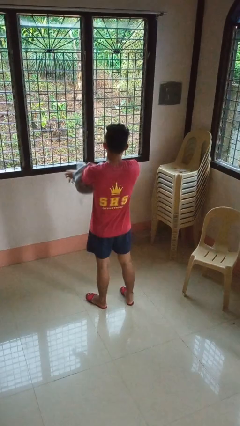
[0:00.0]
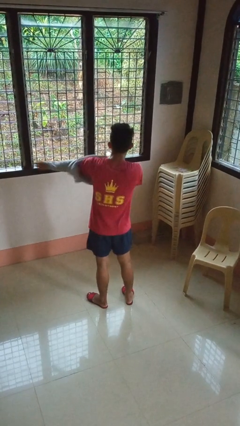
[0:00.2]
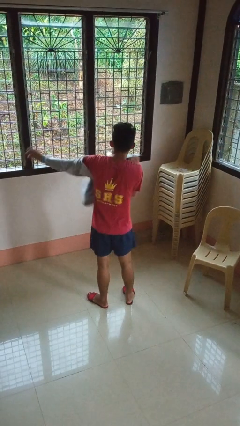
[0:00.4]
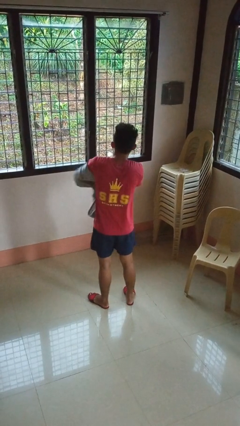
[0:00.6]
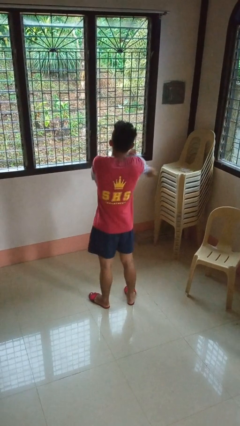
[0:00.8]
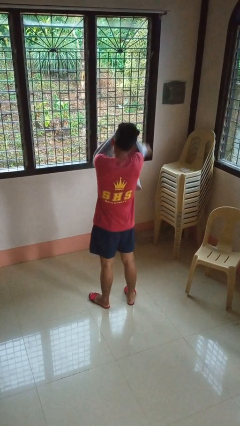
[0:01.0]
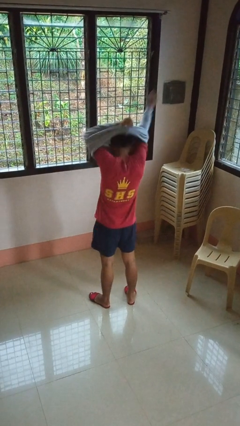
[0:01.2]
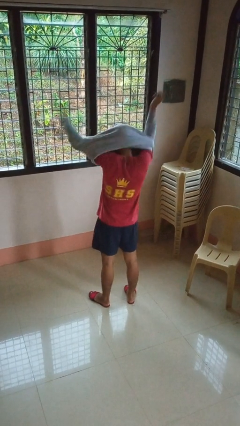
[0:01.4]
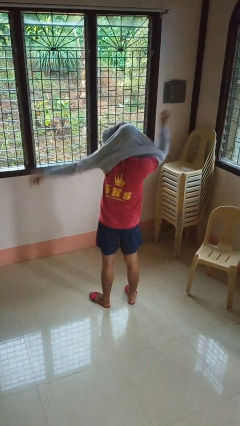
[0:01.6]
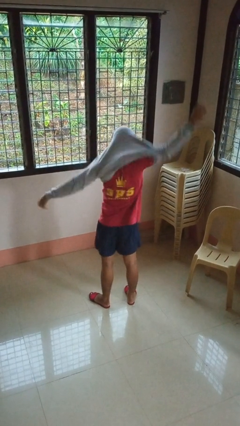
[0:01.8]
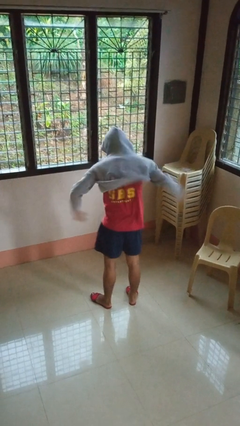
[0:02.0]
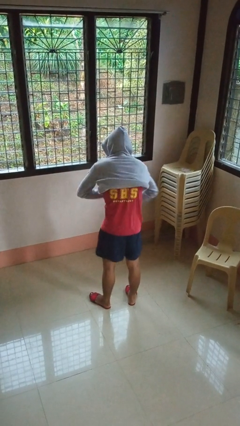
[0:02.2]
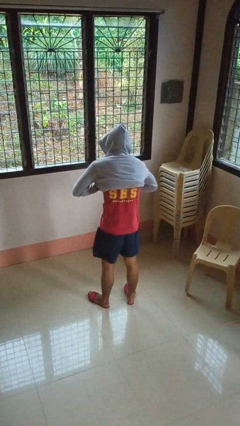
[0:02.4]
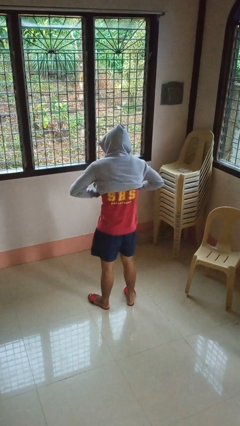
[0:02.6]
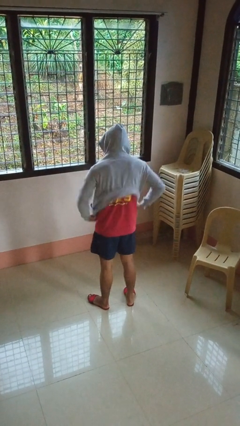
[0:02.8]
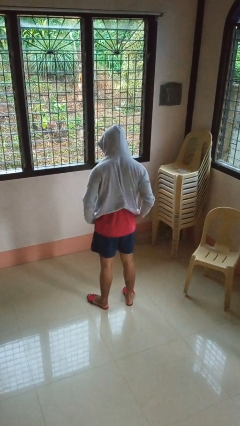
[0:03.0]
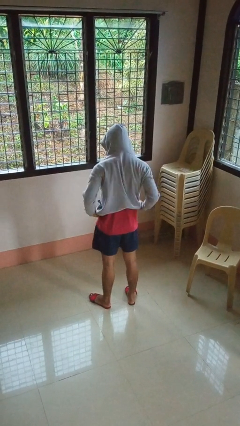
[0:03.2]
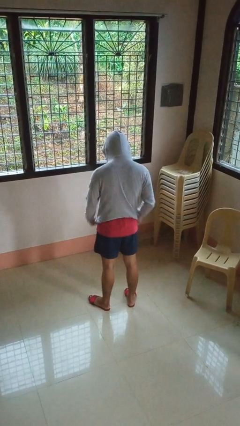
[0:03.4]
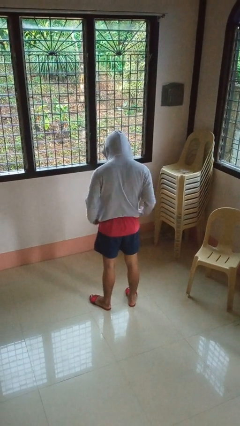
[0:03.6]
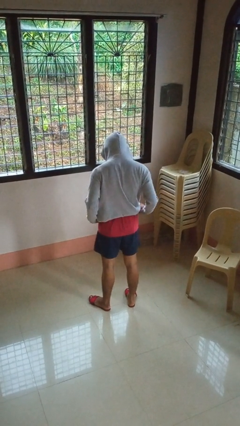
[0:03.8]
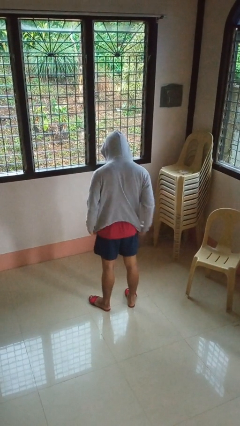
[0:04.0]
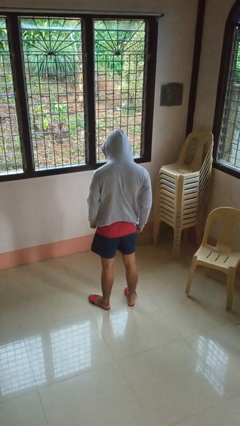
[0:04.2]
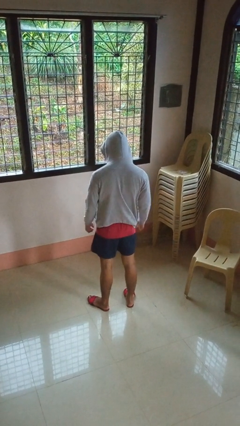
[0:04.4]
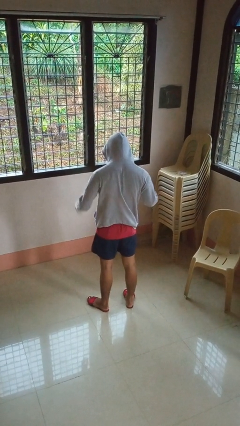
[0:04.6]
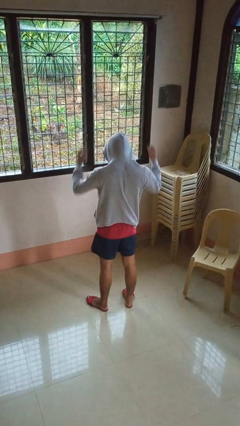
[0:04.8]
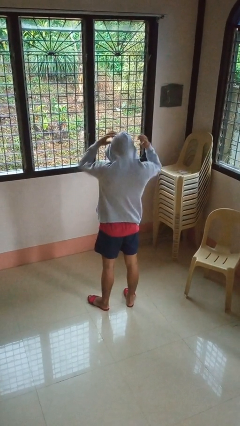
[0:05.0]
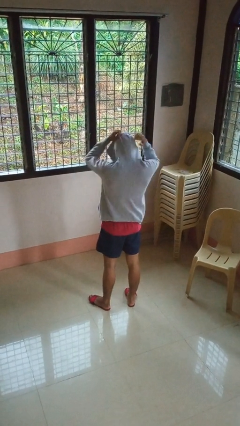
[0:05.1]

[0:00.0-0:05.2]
person puts on hoodie

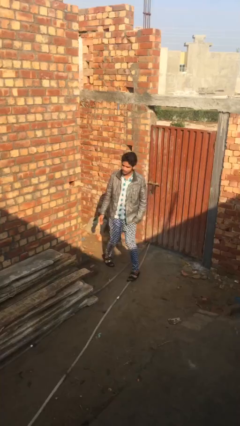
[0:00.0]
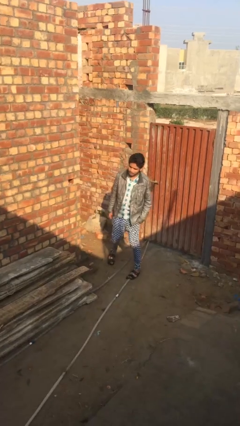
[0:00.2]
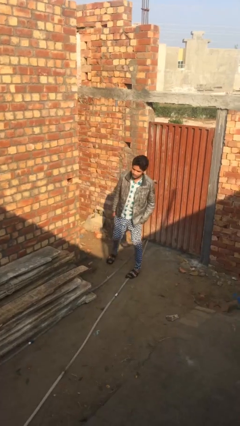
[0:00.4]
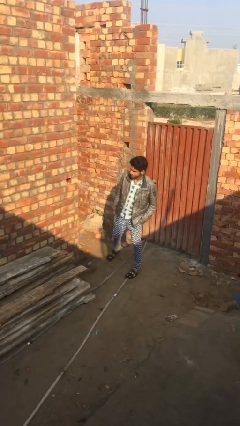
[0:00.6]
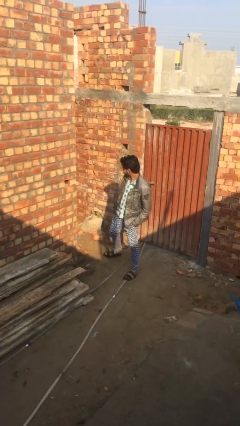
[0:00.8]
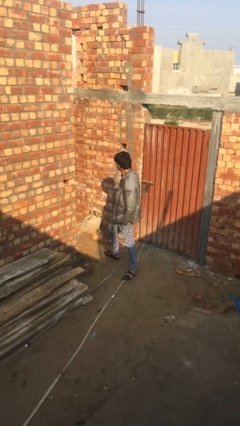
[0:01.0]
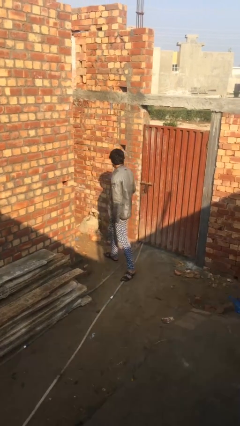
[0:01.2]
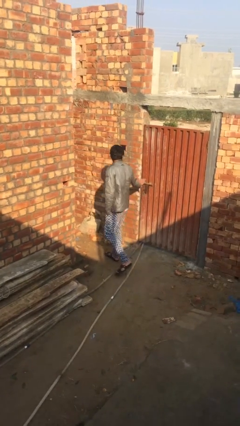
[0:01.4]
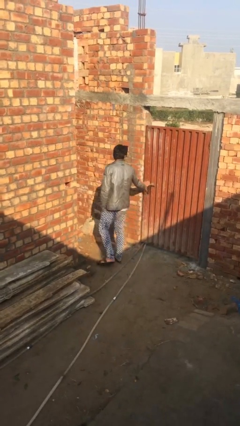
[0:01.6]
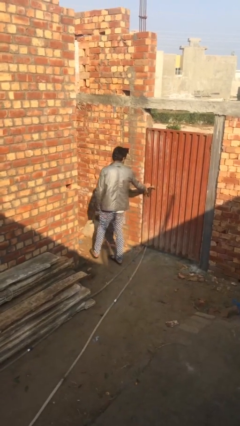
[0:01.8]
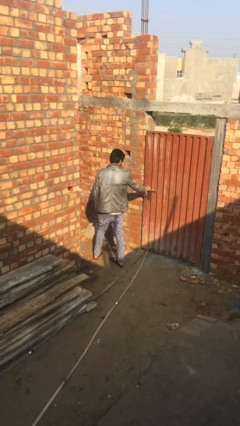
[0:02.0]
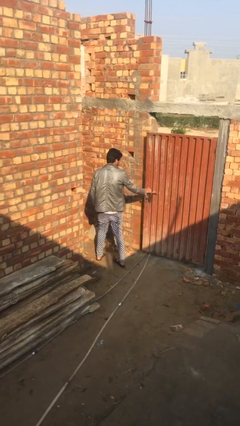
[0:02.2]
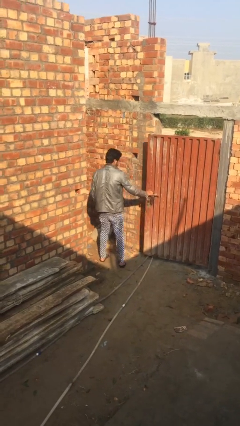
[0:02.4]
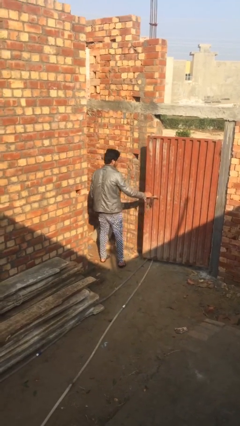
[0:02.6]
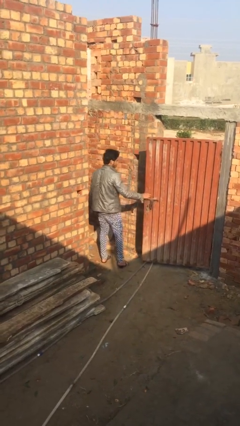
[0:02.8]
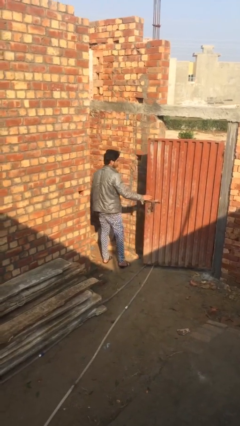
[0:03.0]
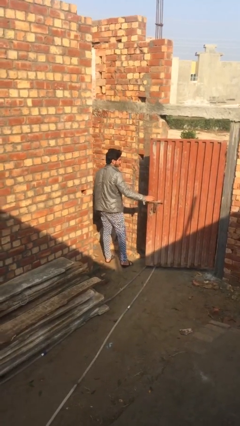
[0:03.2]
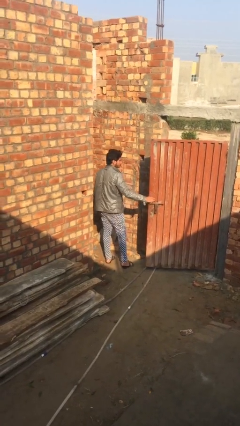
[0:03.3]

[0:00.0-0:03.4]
person opens facility door

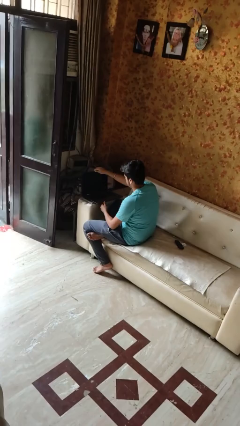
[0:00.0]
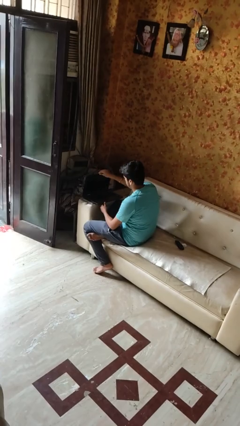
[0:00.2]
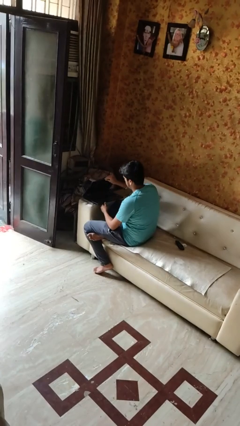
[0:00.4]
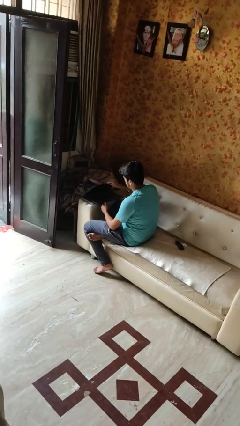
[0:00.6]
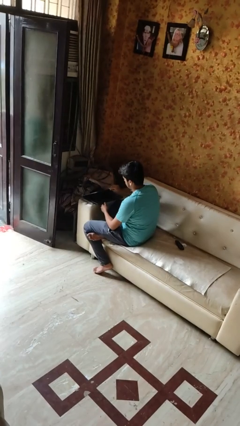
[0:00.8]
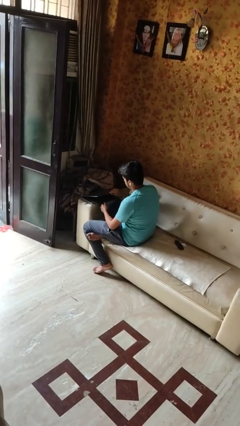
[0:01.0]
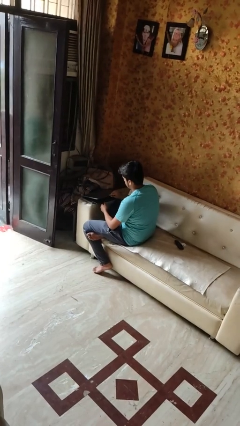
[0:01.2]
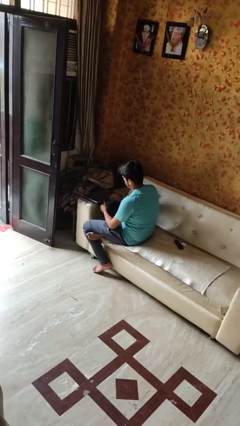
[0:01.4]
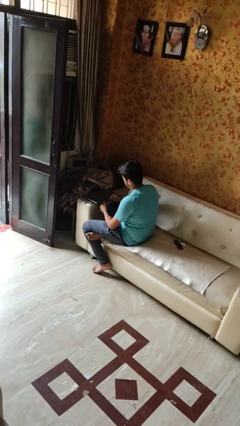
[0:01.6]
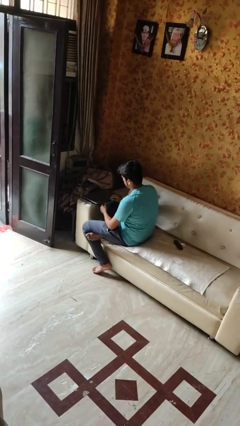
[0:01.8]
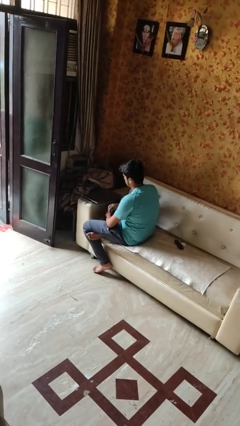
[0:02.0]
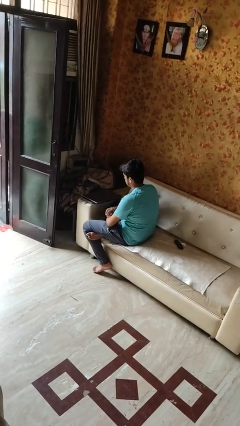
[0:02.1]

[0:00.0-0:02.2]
person closes laptop

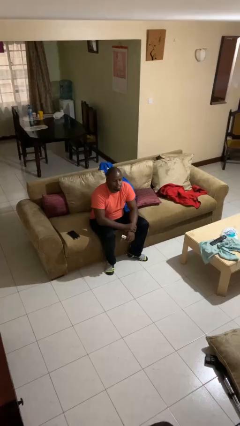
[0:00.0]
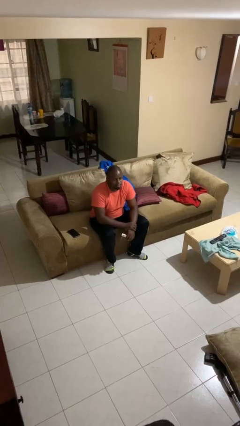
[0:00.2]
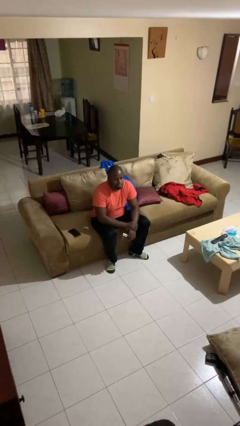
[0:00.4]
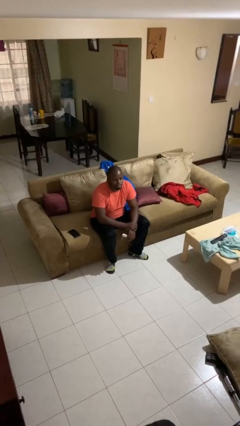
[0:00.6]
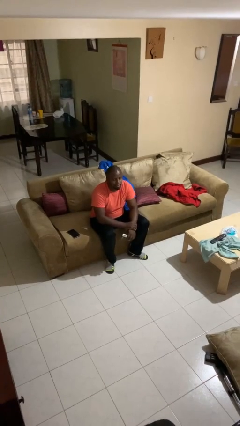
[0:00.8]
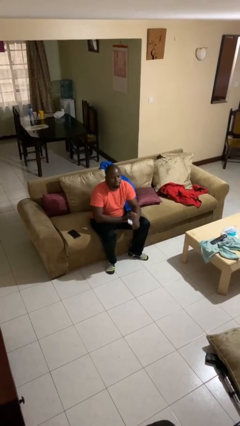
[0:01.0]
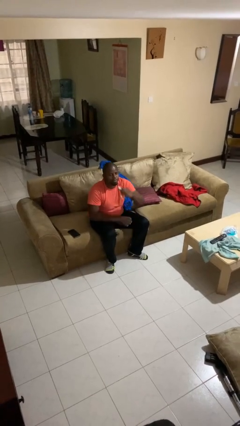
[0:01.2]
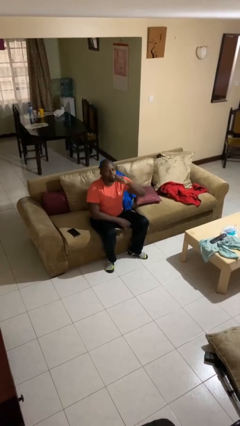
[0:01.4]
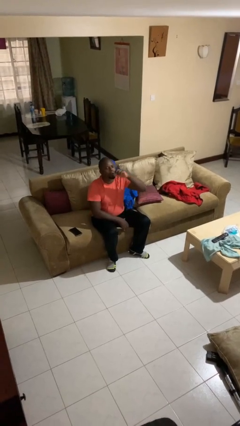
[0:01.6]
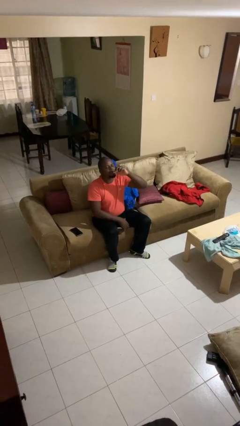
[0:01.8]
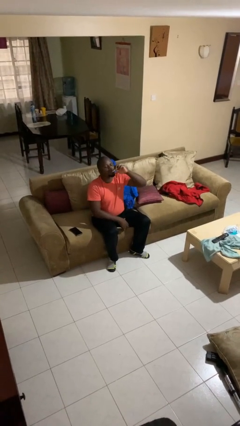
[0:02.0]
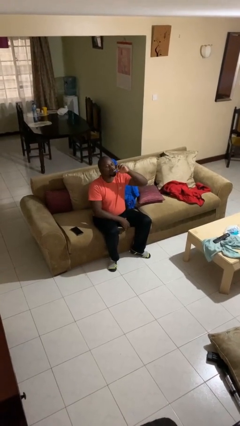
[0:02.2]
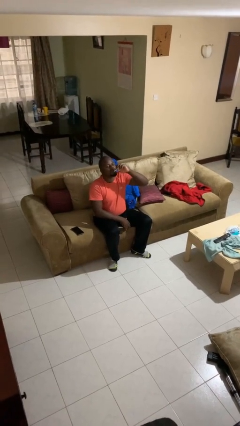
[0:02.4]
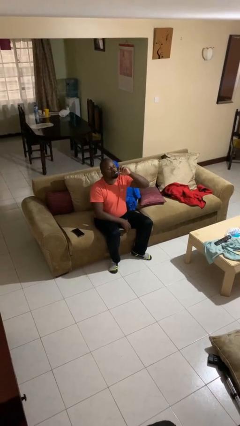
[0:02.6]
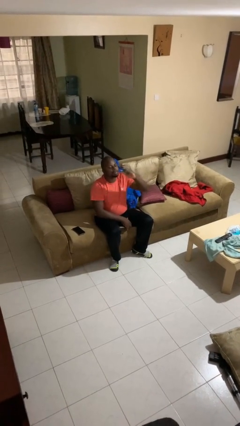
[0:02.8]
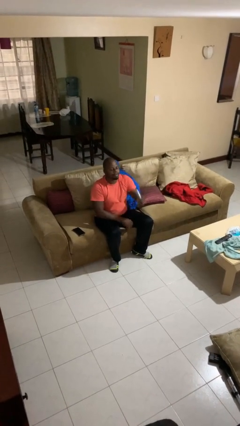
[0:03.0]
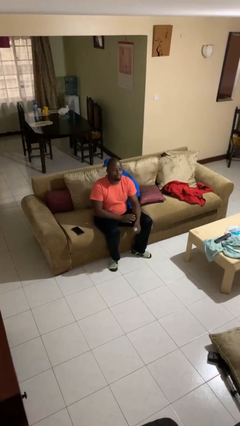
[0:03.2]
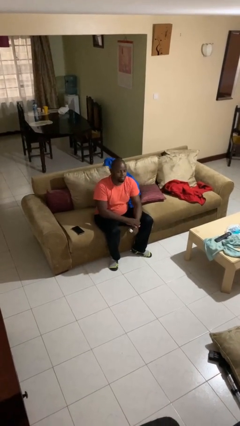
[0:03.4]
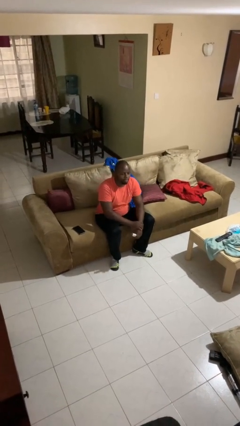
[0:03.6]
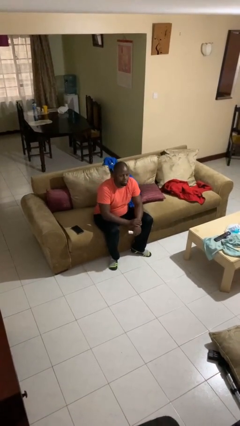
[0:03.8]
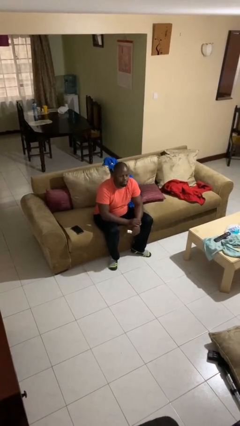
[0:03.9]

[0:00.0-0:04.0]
person vapes

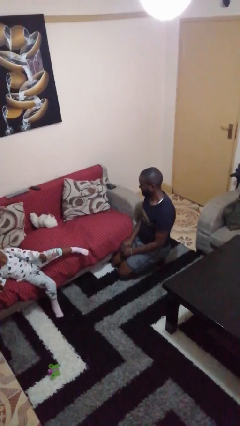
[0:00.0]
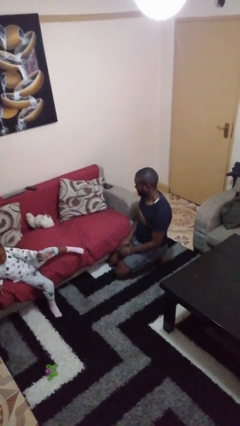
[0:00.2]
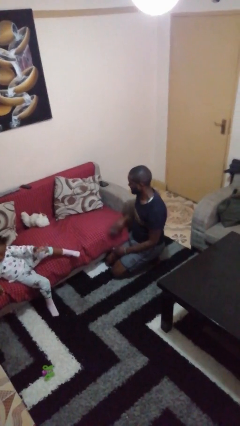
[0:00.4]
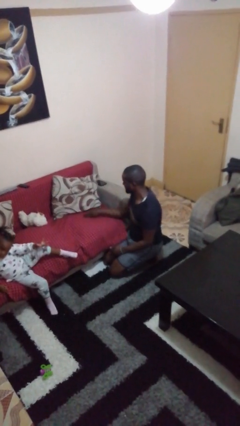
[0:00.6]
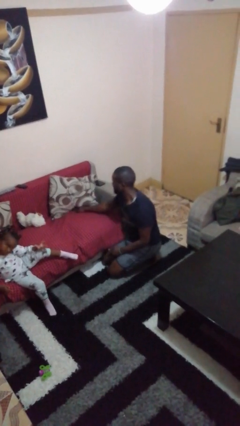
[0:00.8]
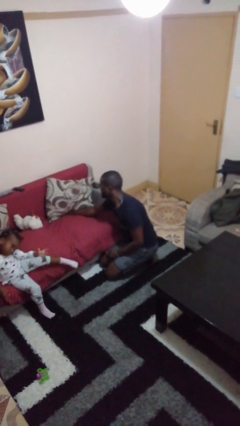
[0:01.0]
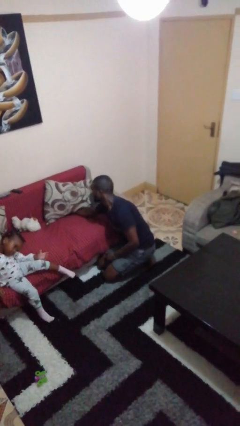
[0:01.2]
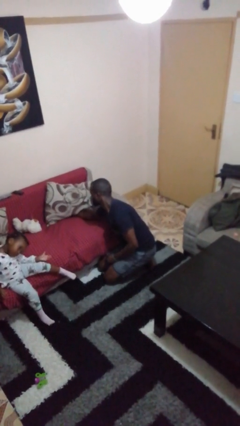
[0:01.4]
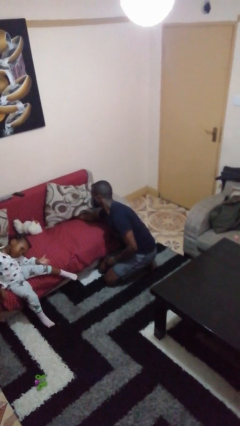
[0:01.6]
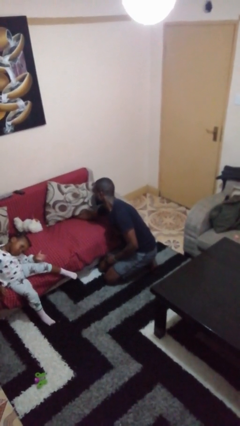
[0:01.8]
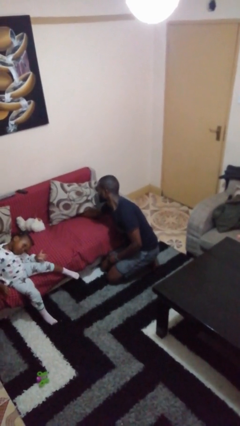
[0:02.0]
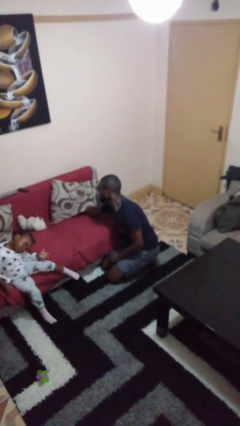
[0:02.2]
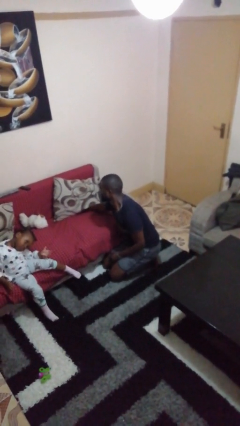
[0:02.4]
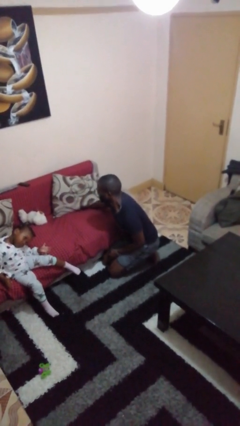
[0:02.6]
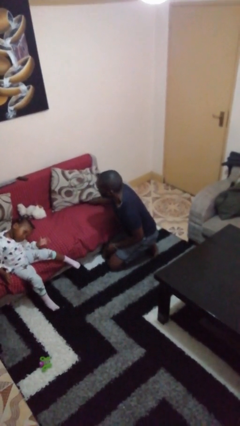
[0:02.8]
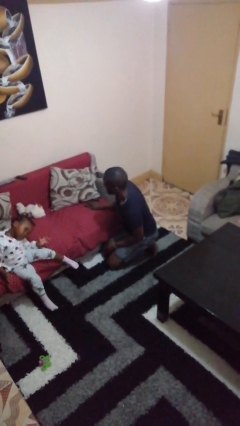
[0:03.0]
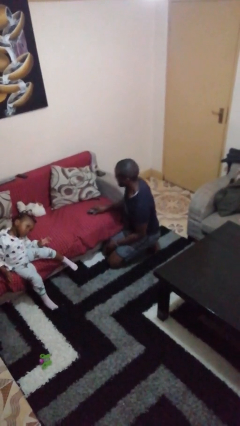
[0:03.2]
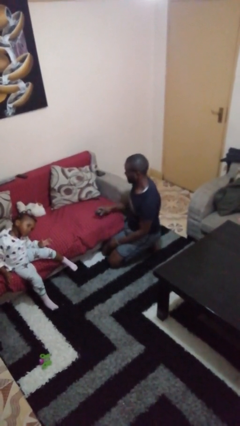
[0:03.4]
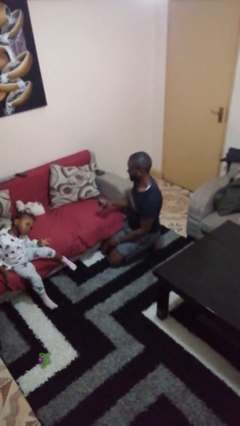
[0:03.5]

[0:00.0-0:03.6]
person searches in couch
